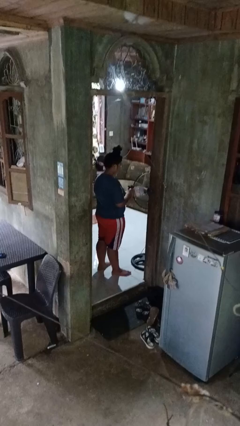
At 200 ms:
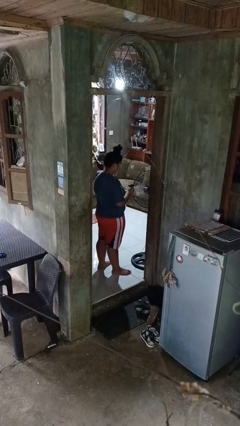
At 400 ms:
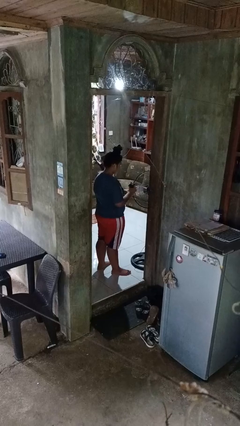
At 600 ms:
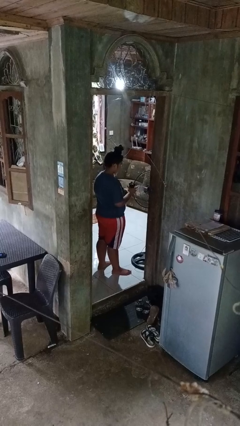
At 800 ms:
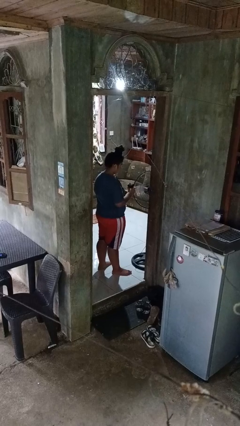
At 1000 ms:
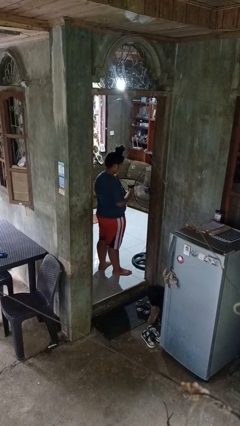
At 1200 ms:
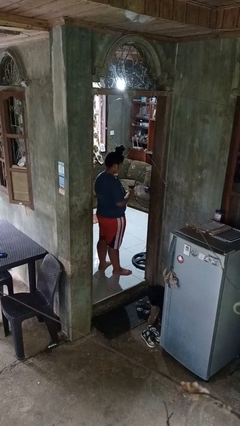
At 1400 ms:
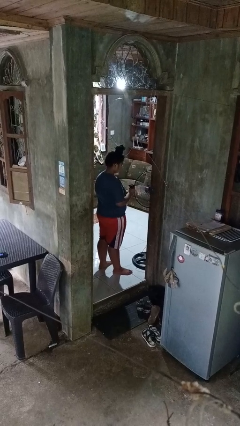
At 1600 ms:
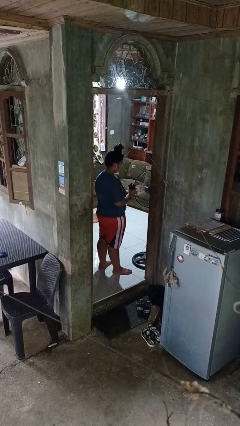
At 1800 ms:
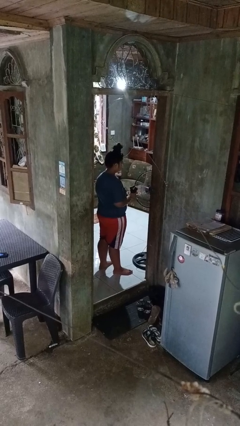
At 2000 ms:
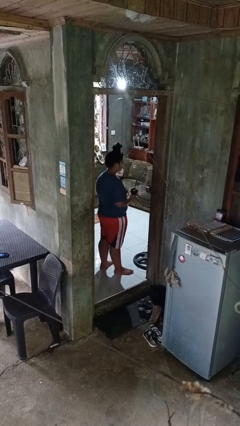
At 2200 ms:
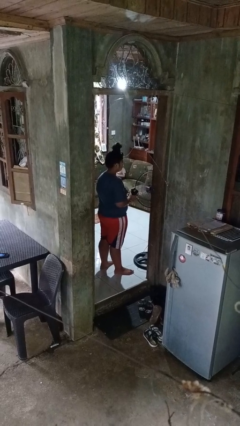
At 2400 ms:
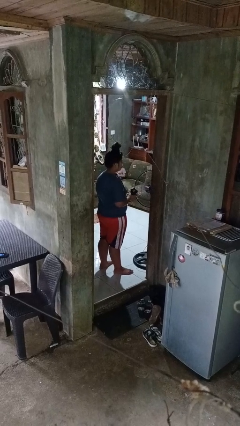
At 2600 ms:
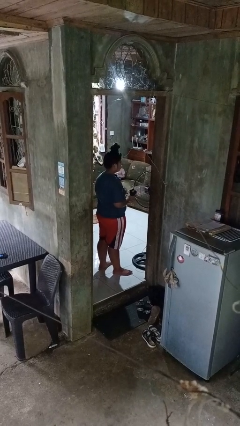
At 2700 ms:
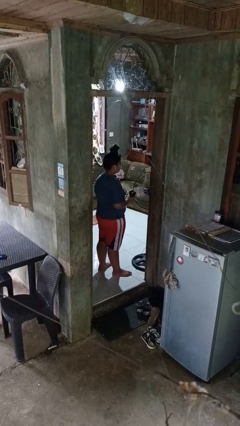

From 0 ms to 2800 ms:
person squeezes object

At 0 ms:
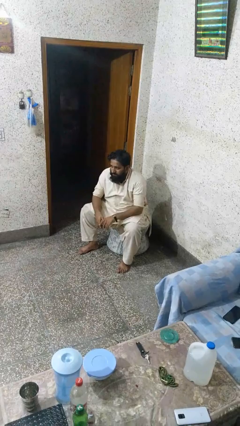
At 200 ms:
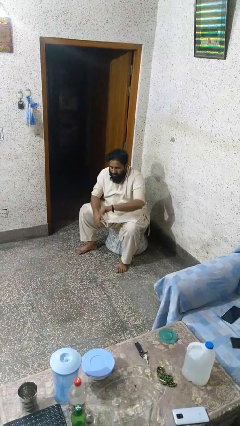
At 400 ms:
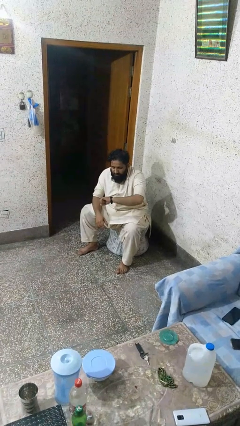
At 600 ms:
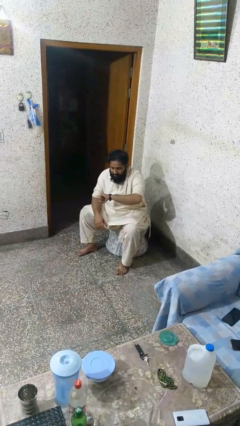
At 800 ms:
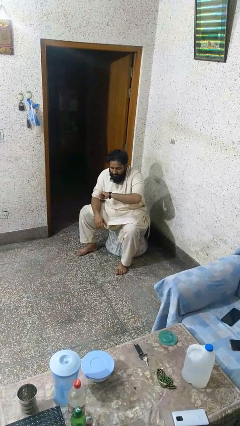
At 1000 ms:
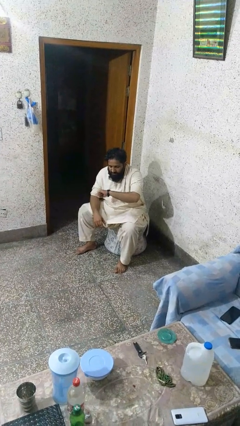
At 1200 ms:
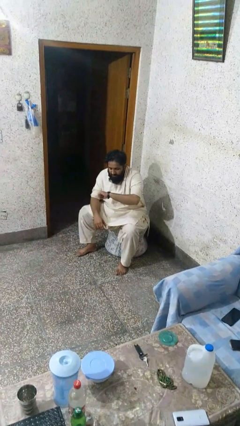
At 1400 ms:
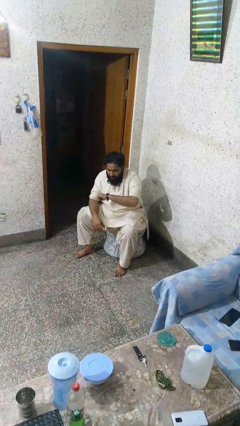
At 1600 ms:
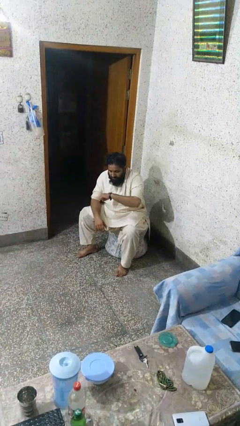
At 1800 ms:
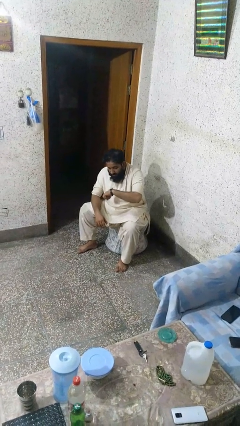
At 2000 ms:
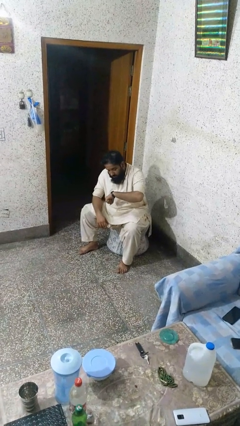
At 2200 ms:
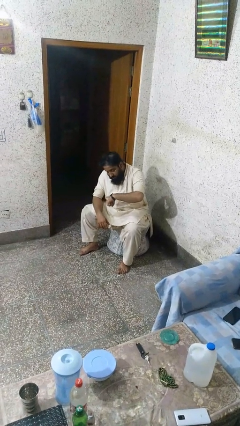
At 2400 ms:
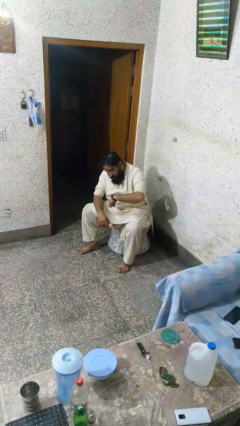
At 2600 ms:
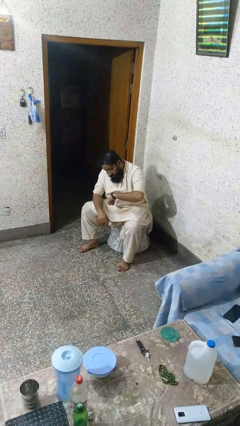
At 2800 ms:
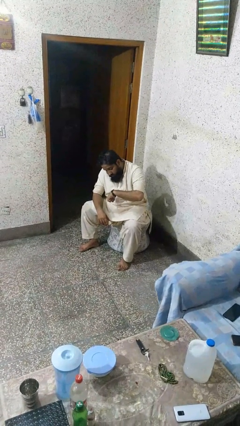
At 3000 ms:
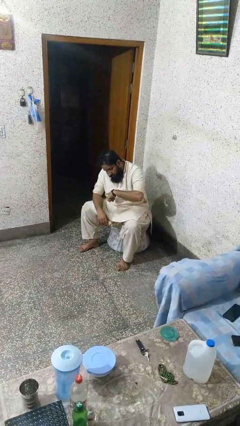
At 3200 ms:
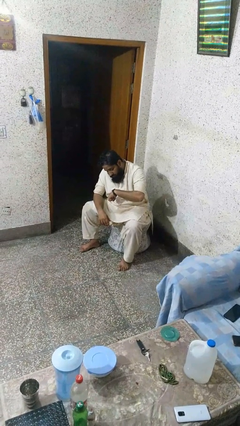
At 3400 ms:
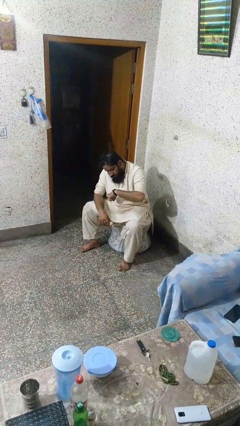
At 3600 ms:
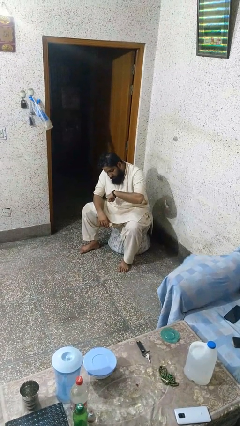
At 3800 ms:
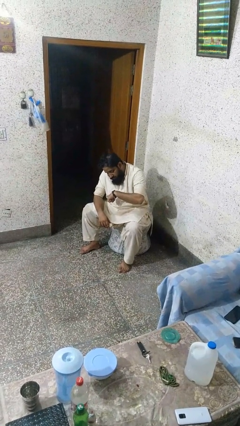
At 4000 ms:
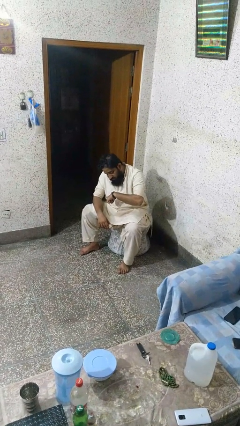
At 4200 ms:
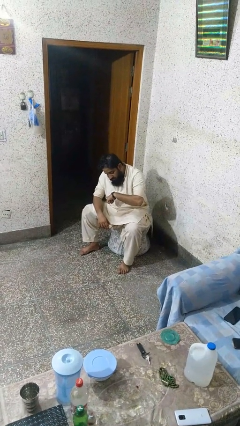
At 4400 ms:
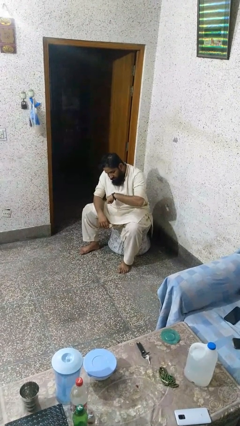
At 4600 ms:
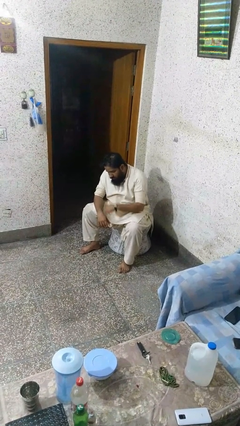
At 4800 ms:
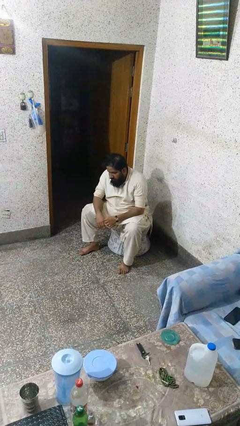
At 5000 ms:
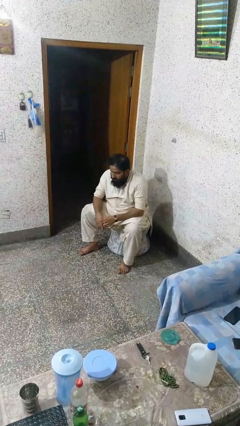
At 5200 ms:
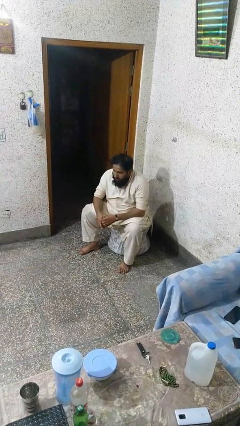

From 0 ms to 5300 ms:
person looks at wristwatch

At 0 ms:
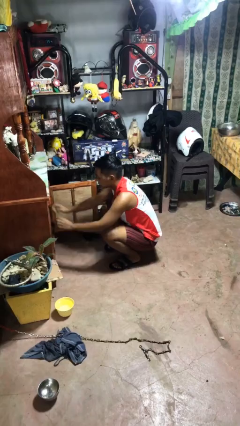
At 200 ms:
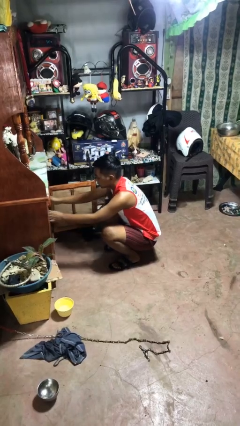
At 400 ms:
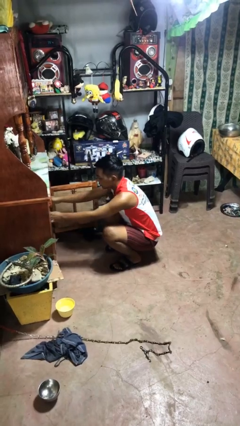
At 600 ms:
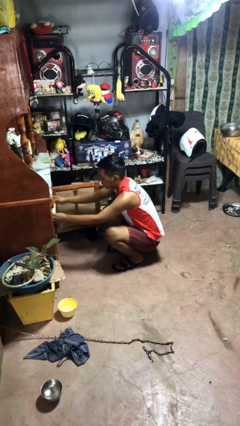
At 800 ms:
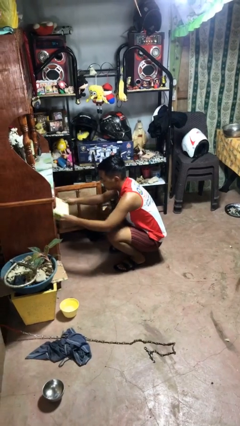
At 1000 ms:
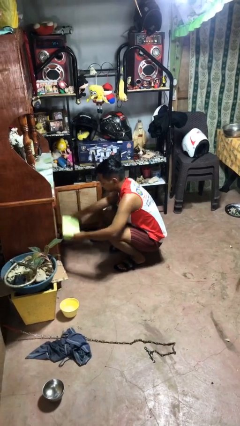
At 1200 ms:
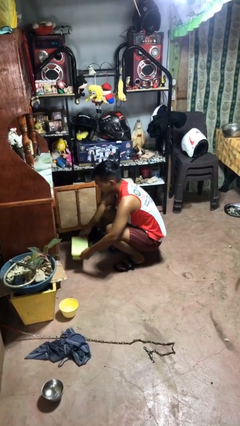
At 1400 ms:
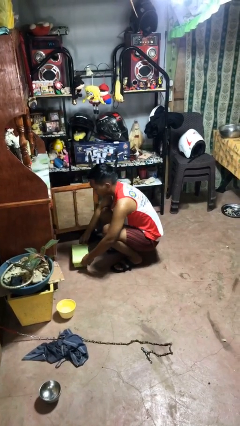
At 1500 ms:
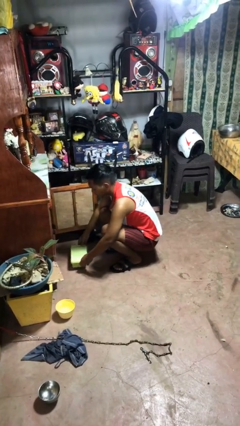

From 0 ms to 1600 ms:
person takes object from cabinet

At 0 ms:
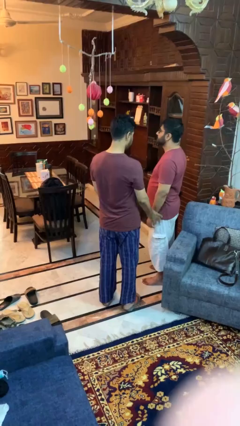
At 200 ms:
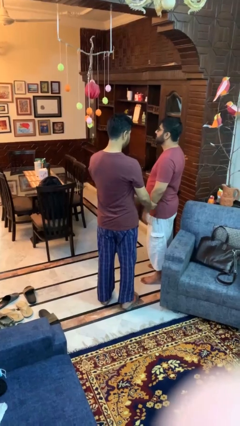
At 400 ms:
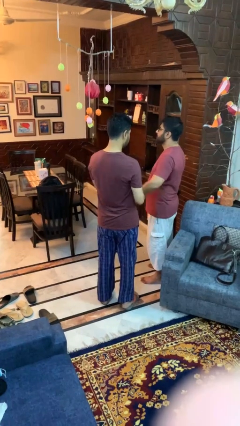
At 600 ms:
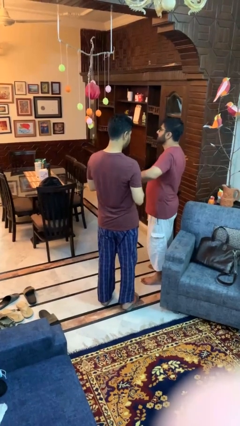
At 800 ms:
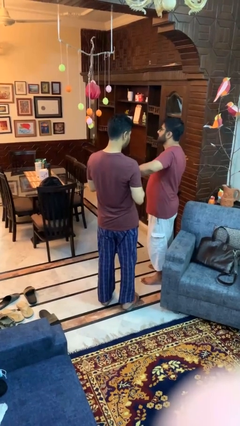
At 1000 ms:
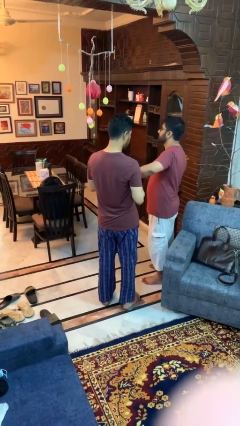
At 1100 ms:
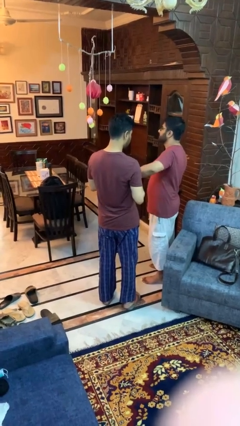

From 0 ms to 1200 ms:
person grabs person by forearm

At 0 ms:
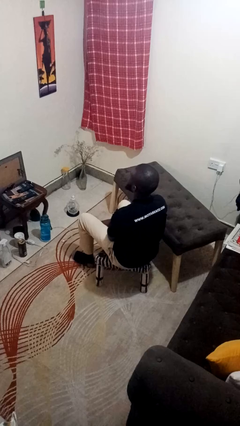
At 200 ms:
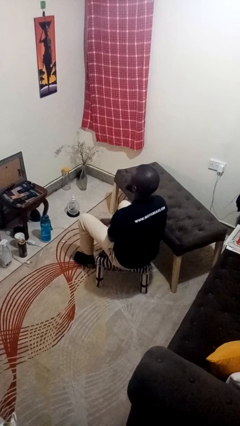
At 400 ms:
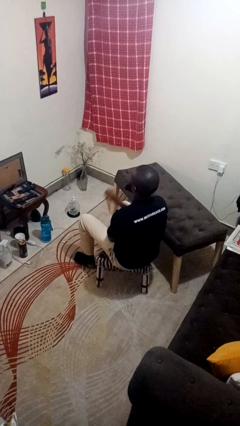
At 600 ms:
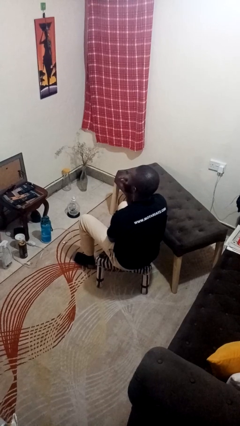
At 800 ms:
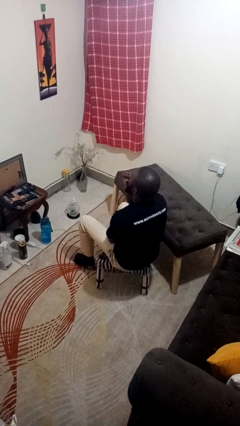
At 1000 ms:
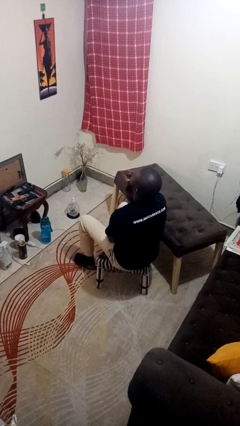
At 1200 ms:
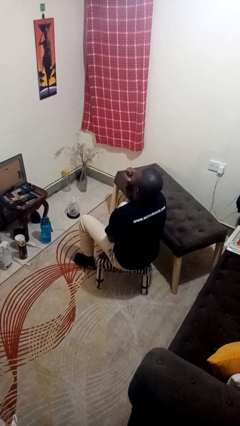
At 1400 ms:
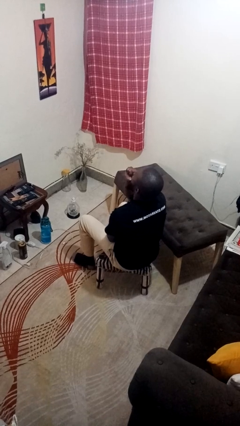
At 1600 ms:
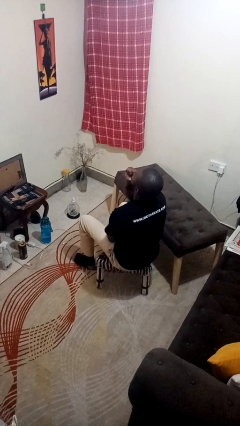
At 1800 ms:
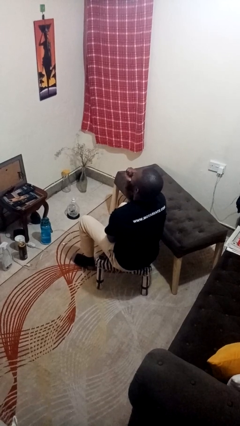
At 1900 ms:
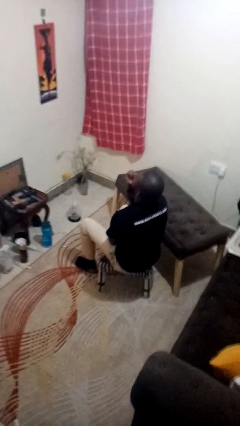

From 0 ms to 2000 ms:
person yawns

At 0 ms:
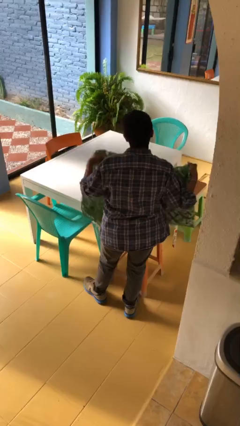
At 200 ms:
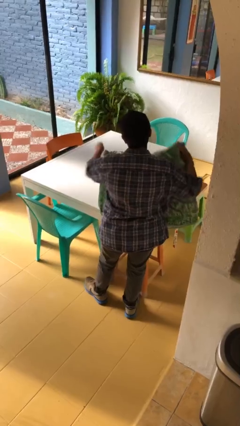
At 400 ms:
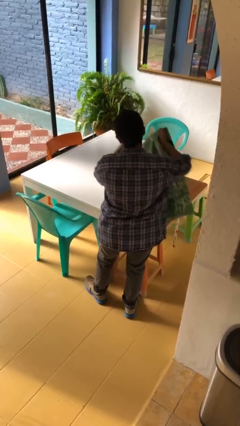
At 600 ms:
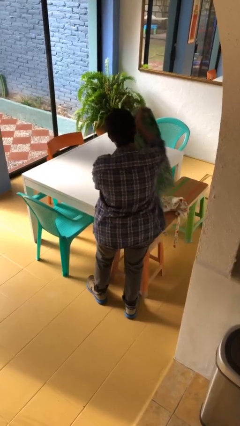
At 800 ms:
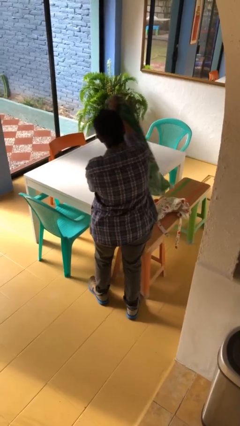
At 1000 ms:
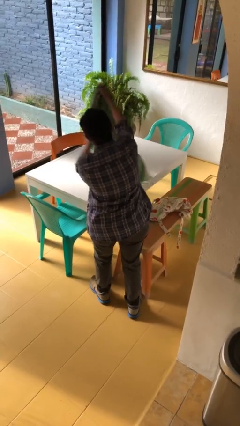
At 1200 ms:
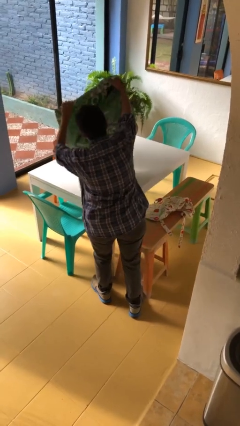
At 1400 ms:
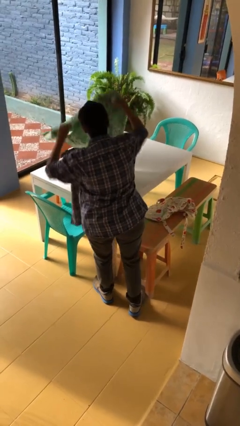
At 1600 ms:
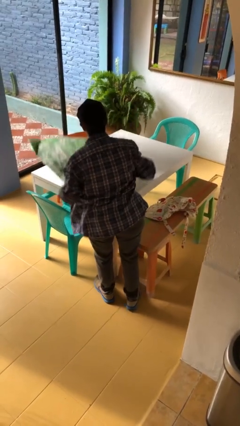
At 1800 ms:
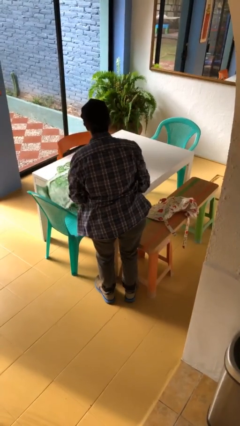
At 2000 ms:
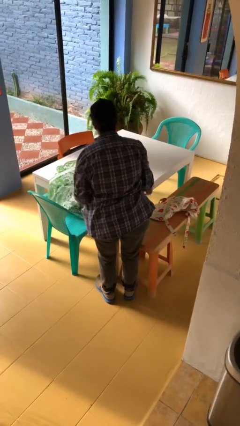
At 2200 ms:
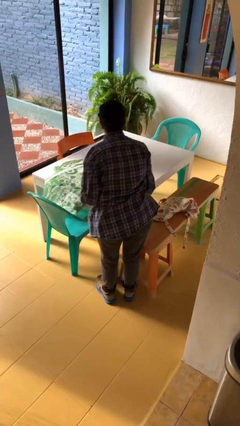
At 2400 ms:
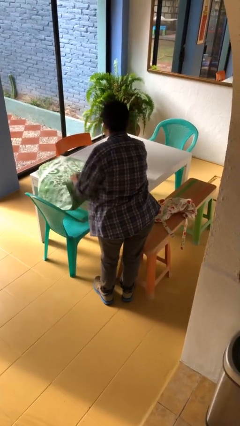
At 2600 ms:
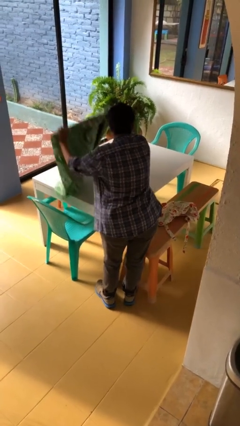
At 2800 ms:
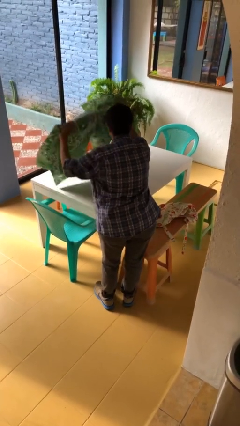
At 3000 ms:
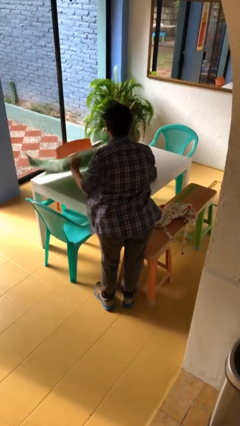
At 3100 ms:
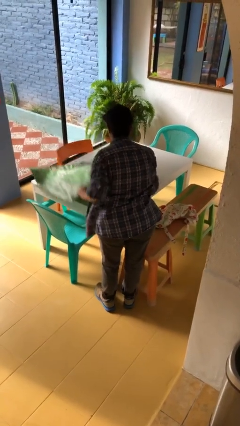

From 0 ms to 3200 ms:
person spreads tablecloth

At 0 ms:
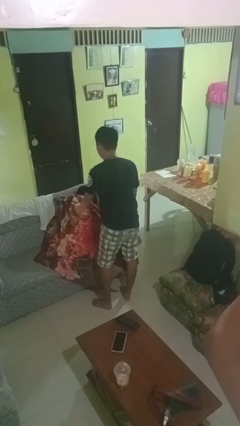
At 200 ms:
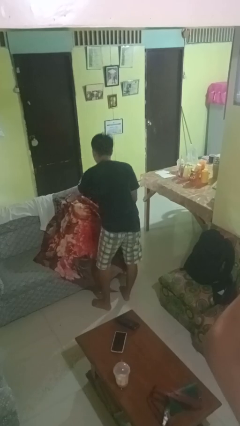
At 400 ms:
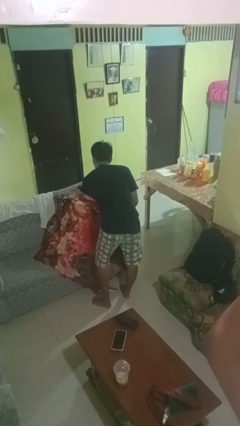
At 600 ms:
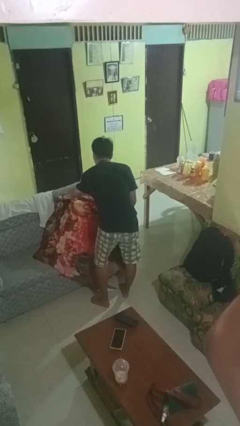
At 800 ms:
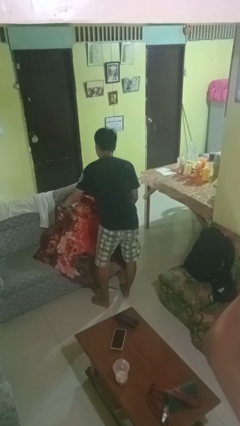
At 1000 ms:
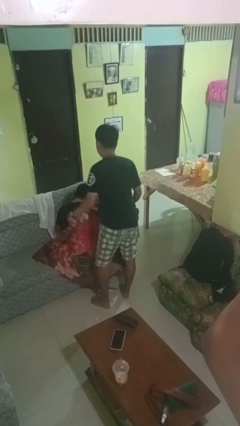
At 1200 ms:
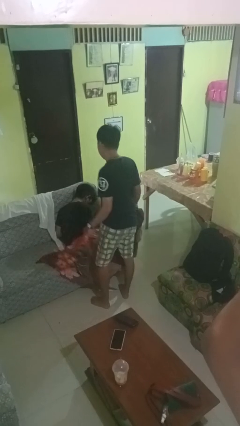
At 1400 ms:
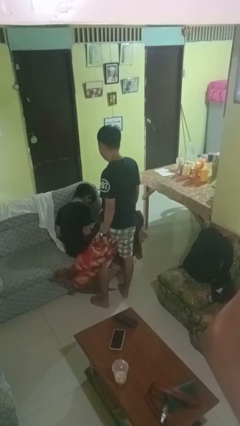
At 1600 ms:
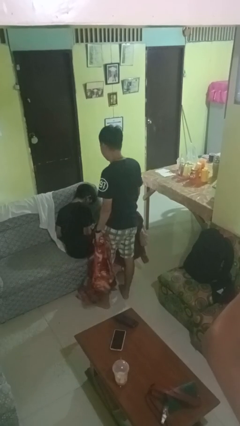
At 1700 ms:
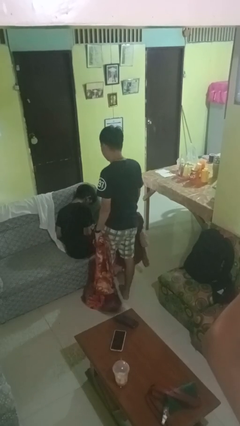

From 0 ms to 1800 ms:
person uncovers friend with blanket
